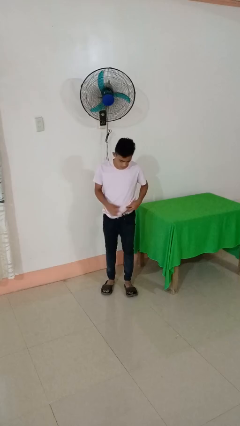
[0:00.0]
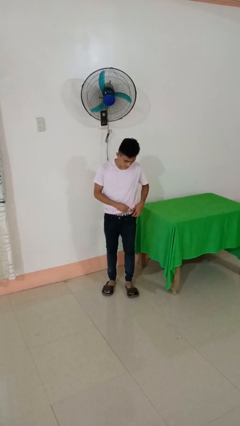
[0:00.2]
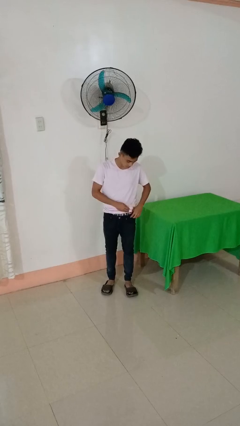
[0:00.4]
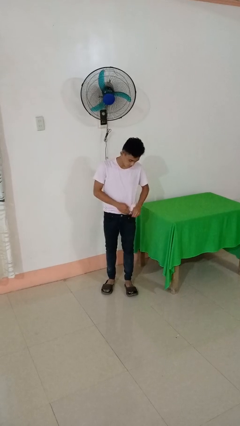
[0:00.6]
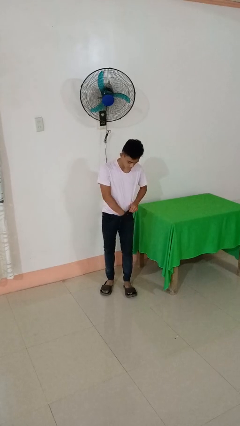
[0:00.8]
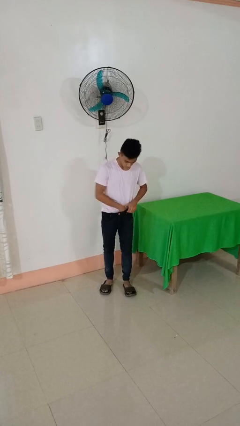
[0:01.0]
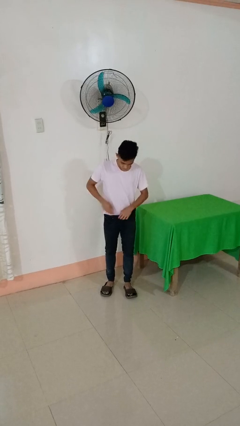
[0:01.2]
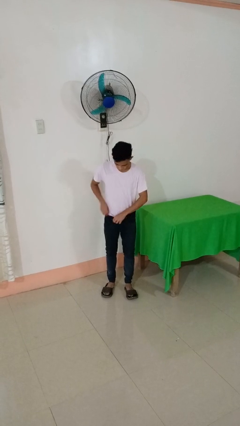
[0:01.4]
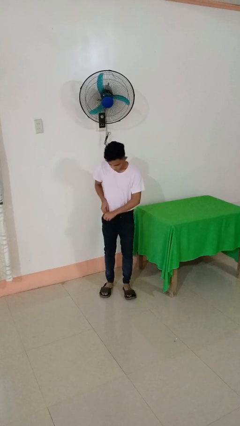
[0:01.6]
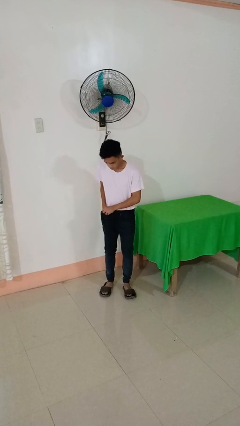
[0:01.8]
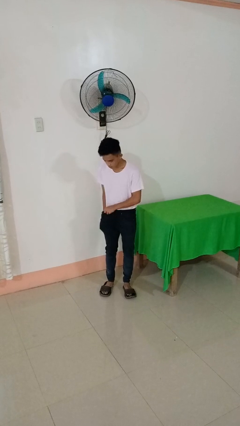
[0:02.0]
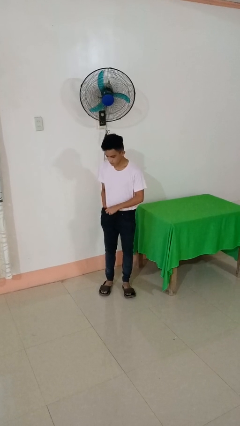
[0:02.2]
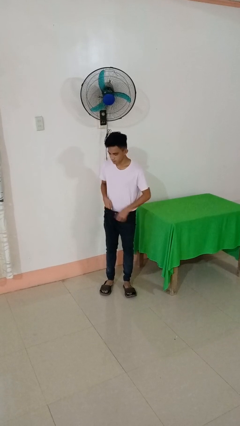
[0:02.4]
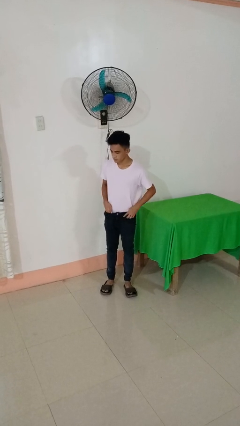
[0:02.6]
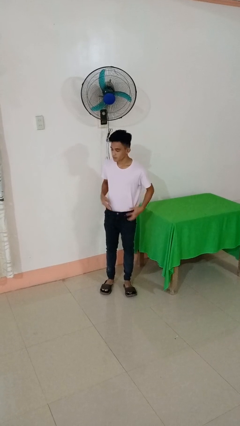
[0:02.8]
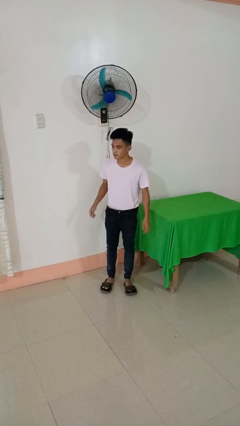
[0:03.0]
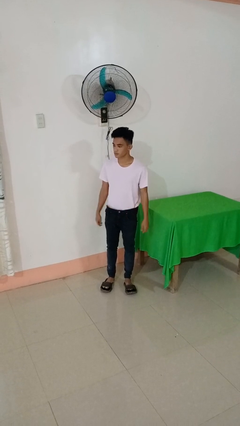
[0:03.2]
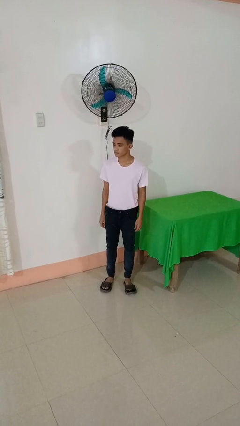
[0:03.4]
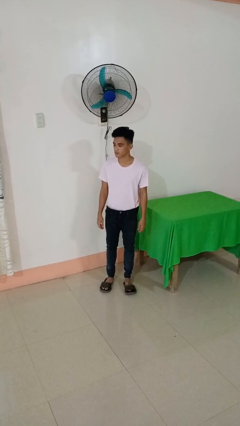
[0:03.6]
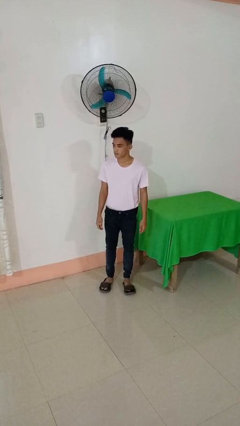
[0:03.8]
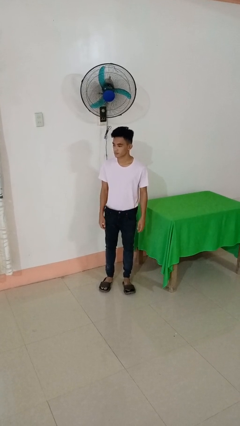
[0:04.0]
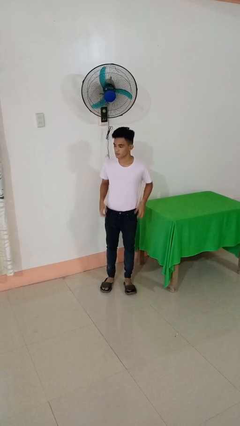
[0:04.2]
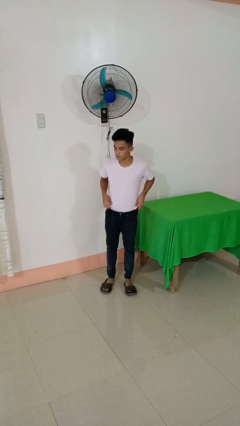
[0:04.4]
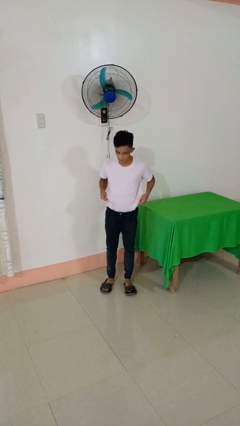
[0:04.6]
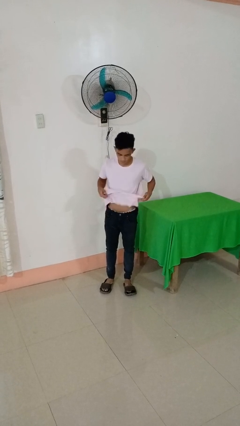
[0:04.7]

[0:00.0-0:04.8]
person tucks in shirt

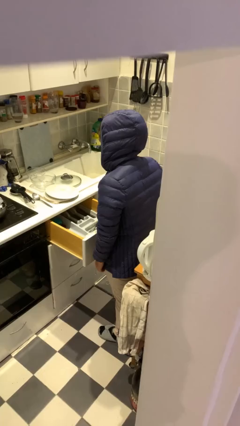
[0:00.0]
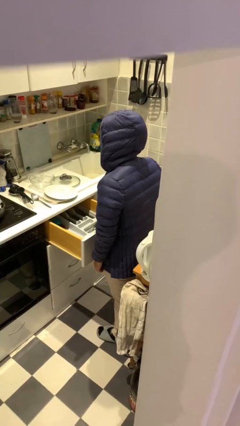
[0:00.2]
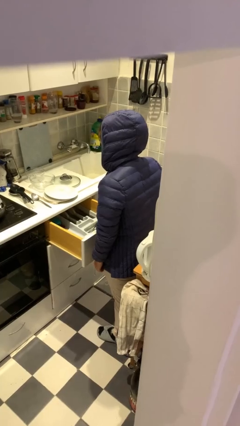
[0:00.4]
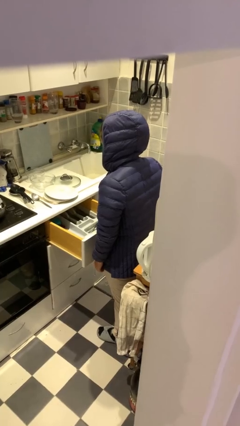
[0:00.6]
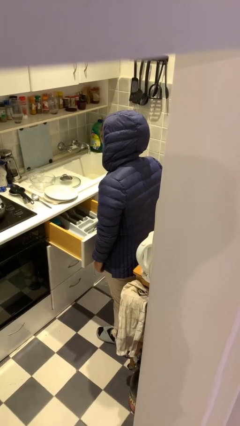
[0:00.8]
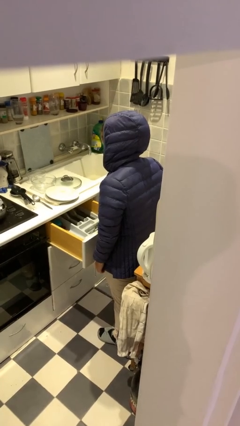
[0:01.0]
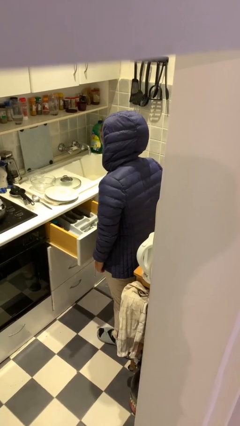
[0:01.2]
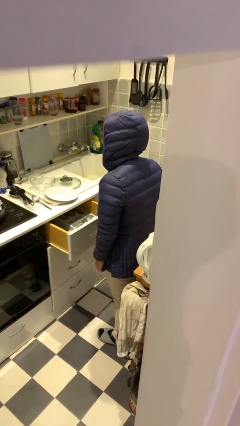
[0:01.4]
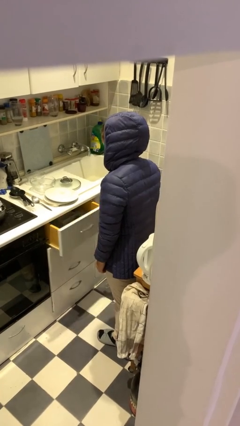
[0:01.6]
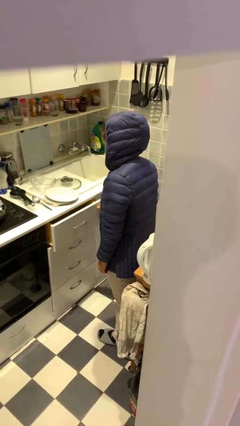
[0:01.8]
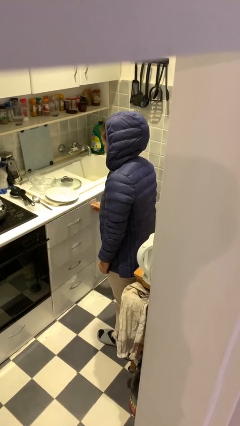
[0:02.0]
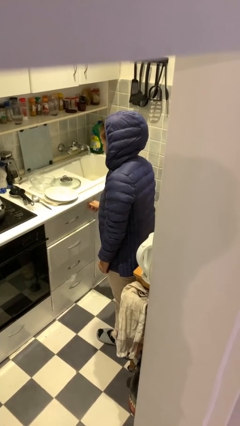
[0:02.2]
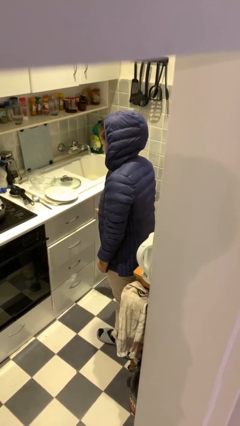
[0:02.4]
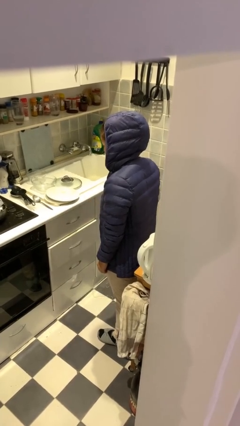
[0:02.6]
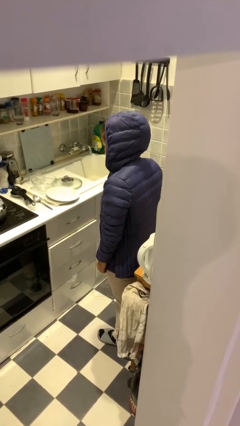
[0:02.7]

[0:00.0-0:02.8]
person closes kitchen drawer

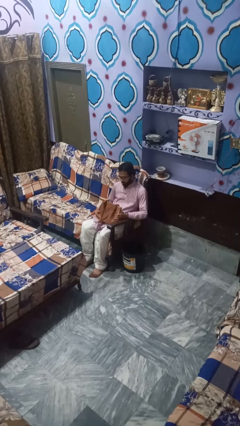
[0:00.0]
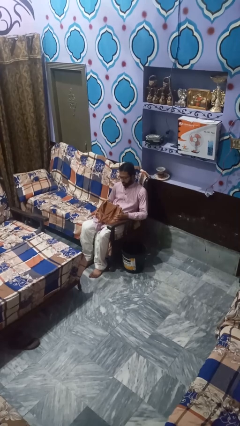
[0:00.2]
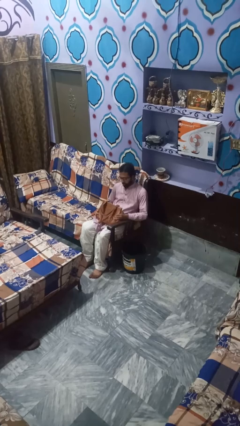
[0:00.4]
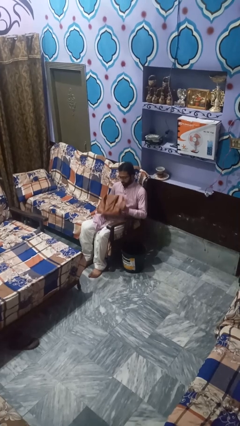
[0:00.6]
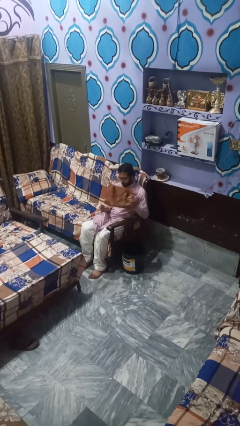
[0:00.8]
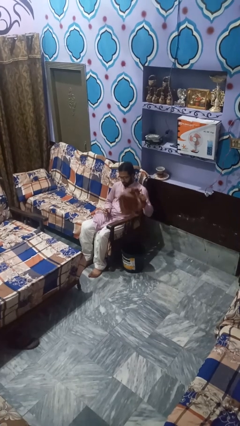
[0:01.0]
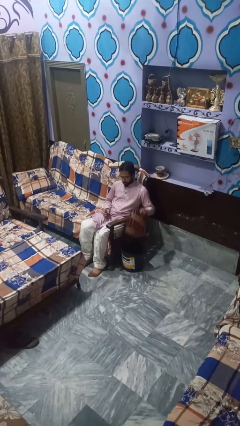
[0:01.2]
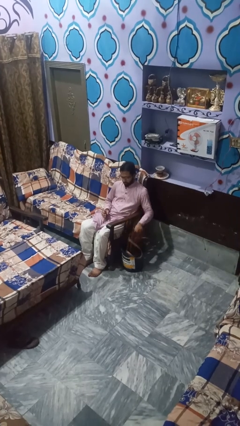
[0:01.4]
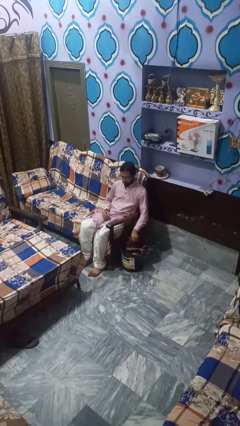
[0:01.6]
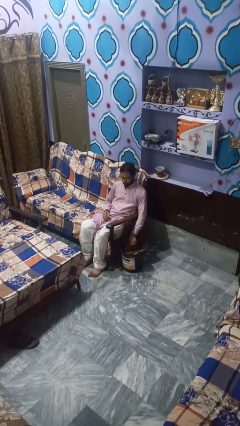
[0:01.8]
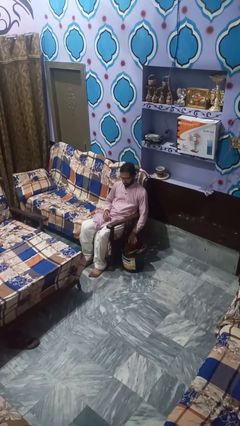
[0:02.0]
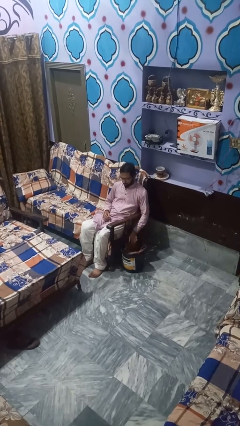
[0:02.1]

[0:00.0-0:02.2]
person puts object into basket

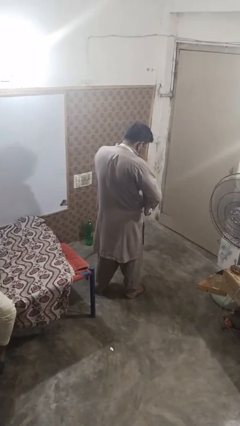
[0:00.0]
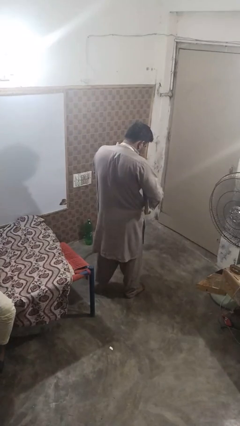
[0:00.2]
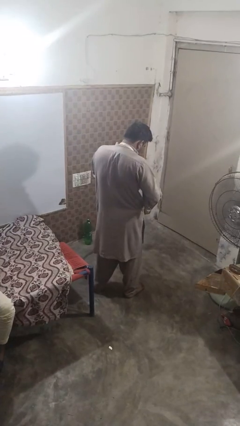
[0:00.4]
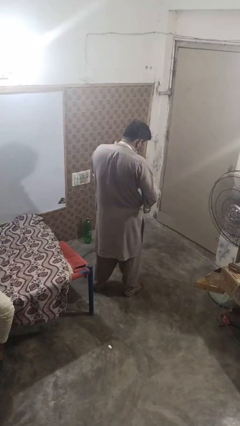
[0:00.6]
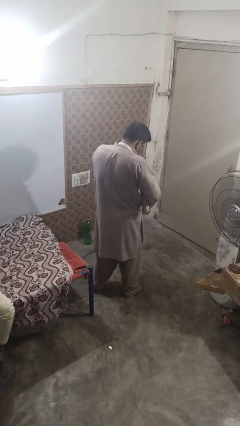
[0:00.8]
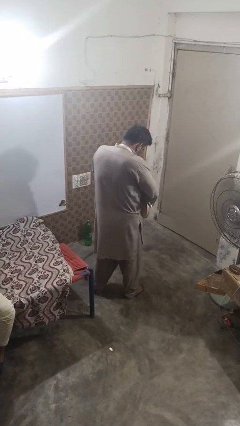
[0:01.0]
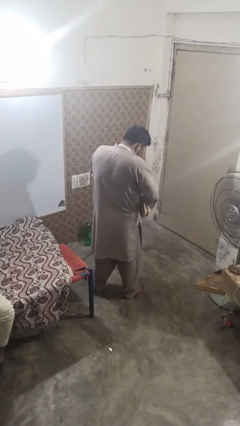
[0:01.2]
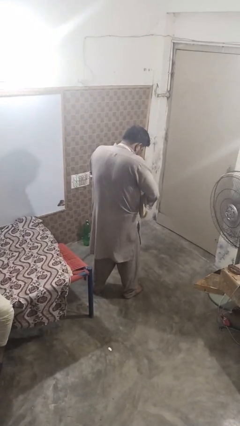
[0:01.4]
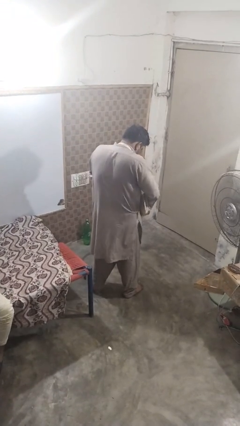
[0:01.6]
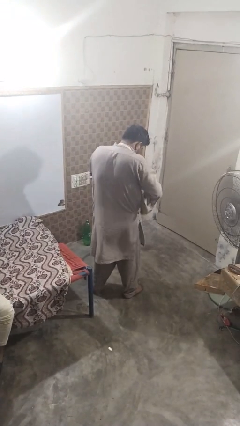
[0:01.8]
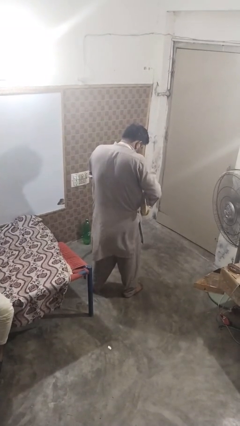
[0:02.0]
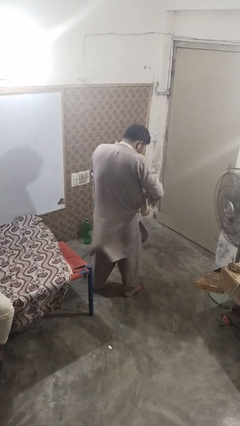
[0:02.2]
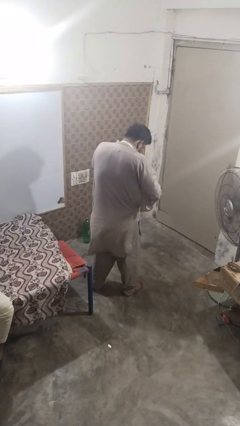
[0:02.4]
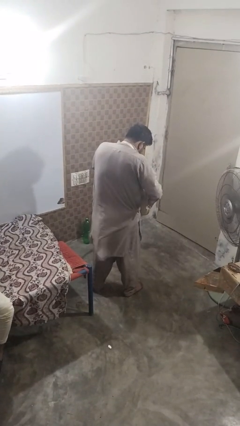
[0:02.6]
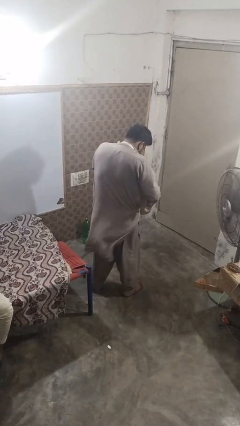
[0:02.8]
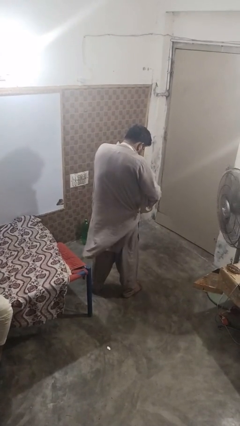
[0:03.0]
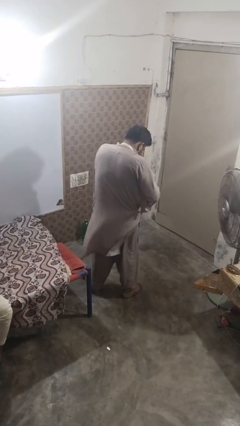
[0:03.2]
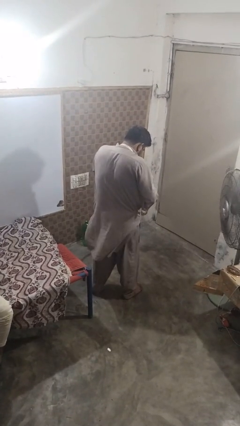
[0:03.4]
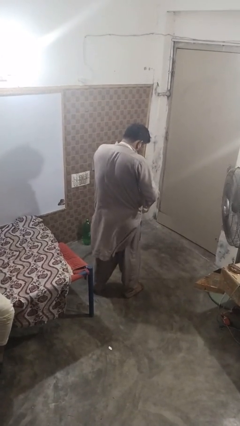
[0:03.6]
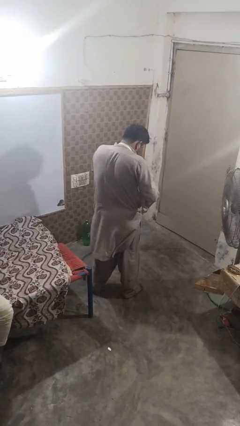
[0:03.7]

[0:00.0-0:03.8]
person searches in purse

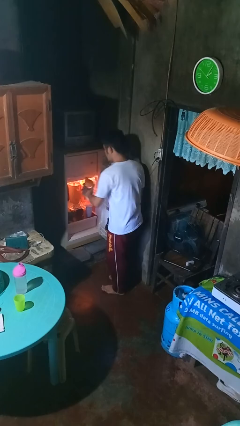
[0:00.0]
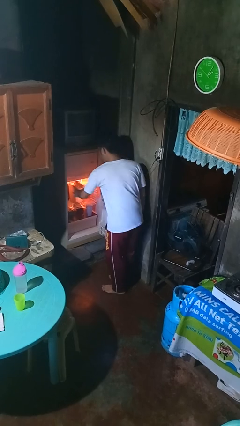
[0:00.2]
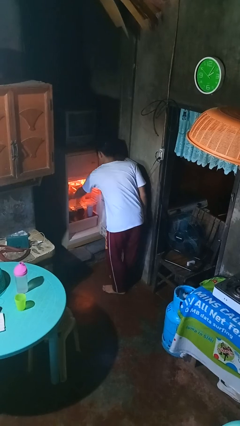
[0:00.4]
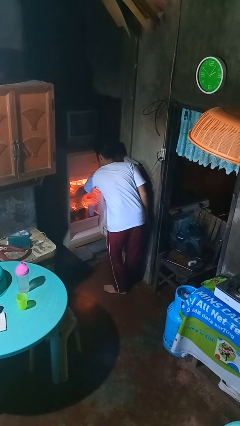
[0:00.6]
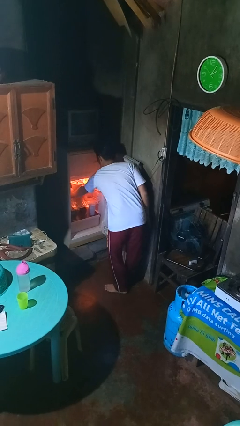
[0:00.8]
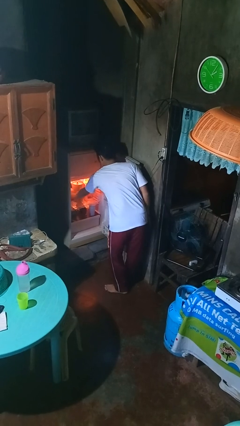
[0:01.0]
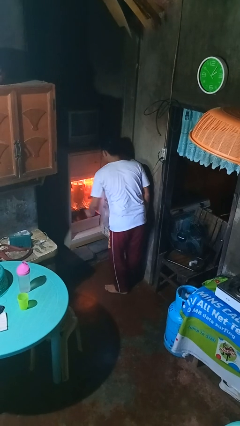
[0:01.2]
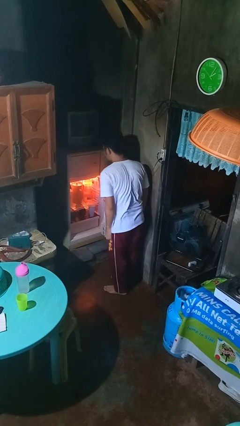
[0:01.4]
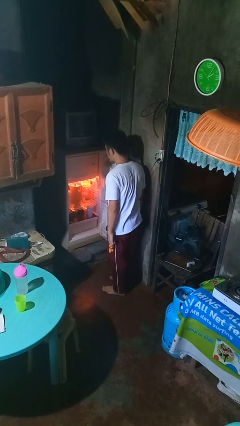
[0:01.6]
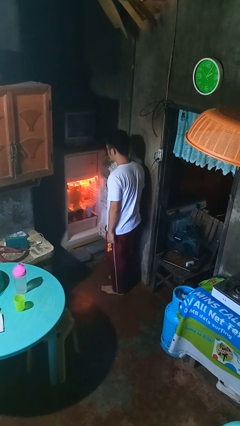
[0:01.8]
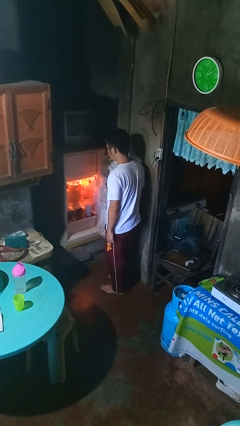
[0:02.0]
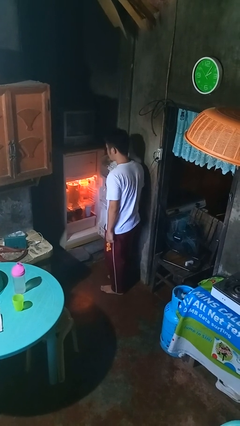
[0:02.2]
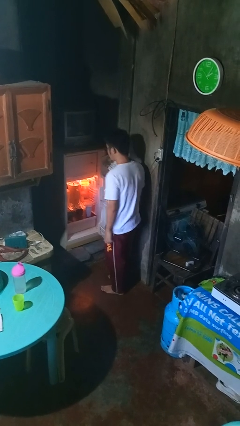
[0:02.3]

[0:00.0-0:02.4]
person puts object into refrigerator

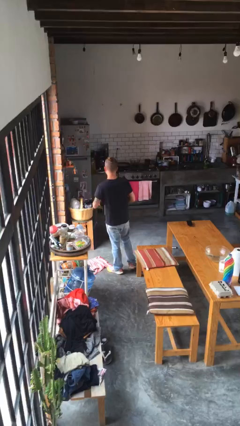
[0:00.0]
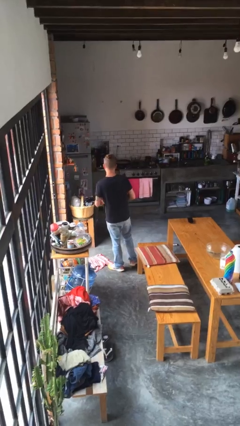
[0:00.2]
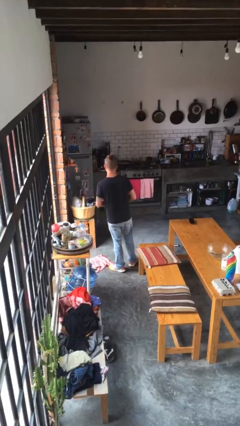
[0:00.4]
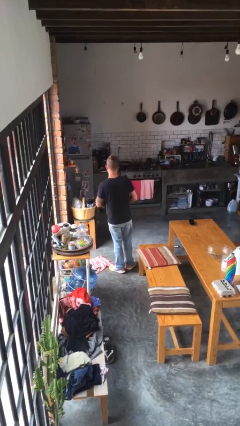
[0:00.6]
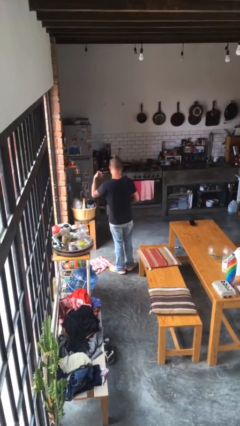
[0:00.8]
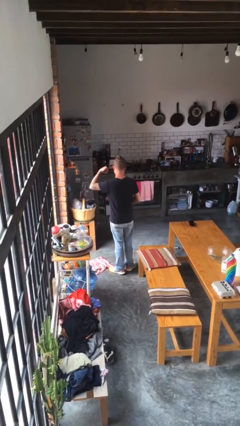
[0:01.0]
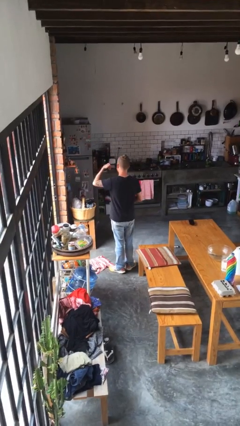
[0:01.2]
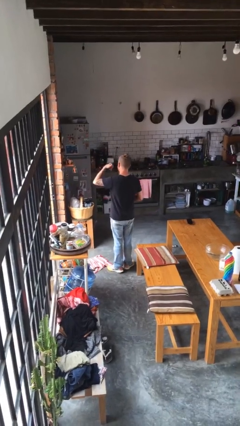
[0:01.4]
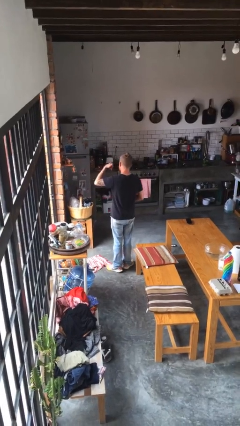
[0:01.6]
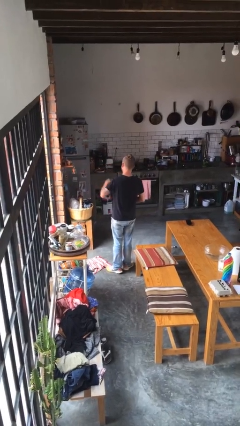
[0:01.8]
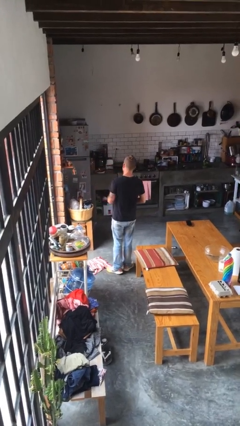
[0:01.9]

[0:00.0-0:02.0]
person gestures call me
